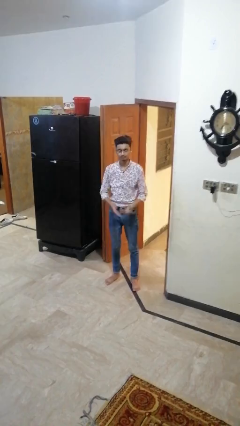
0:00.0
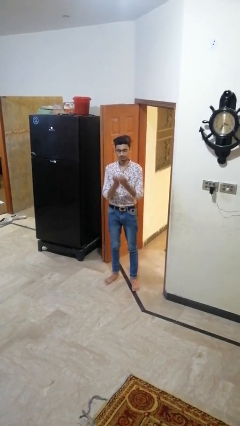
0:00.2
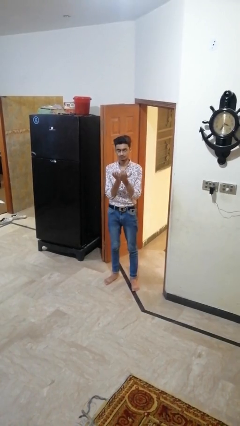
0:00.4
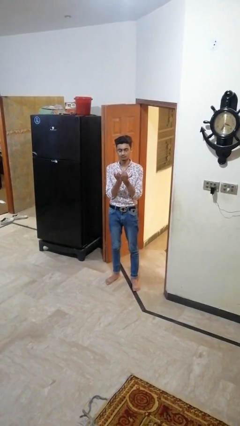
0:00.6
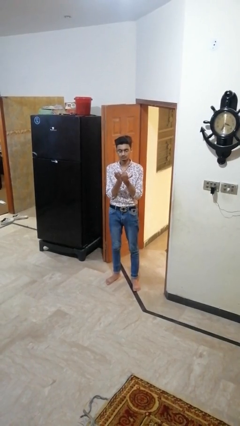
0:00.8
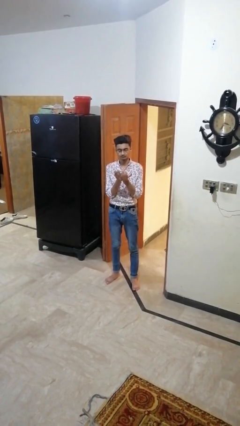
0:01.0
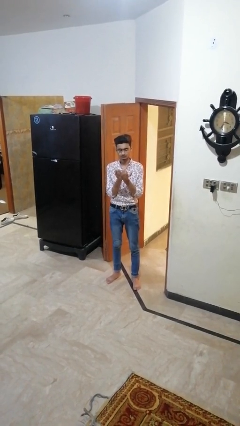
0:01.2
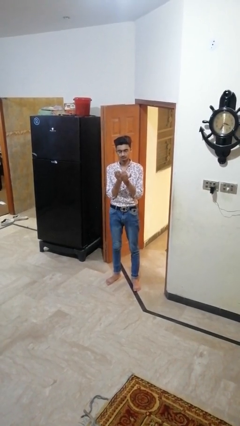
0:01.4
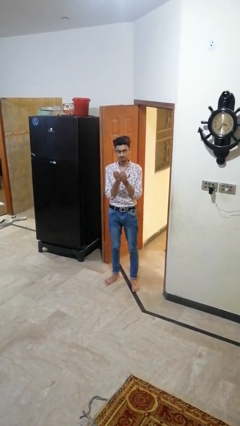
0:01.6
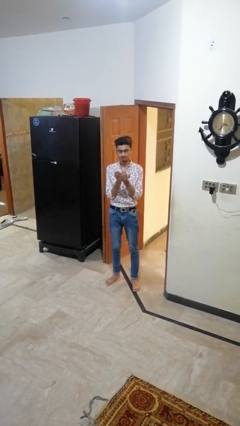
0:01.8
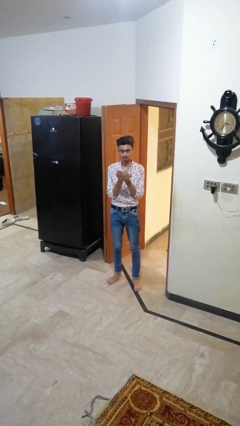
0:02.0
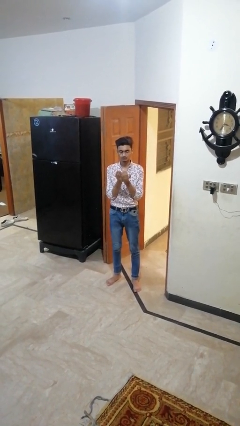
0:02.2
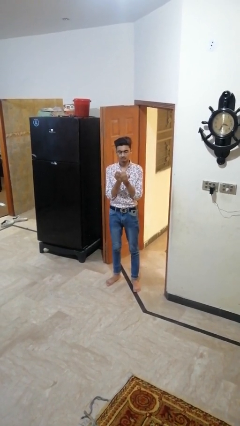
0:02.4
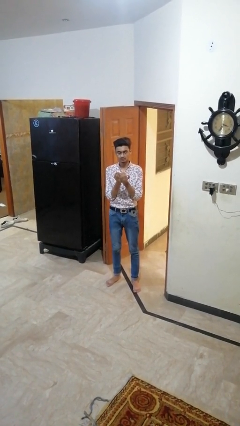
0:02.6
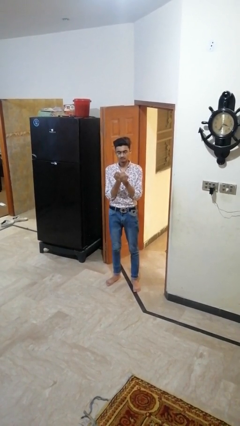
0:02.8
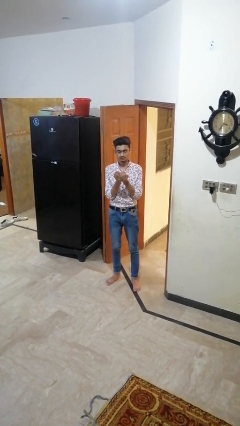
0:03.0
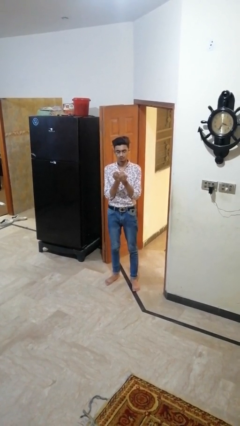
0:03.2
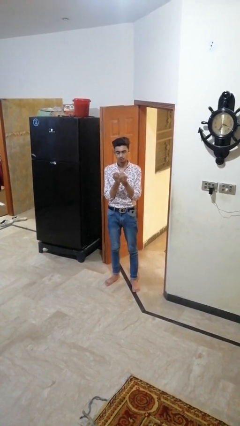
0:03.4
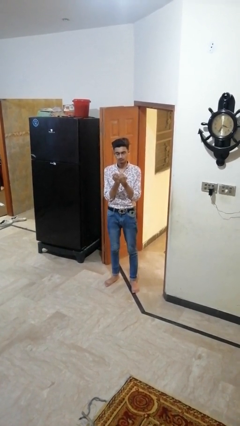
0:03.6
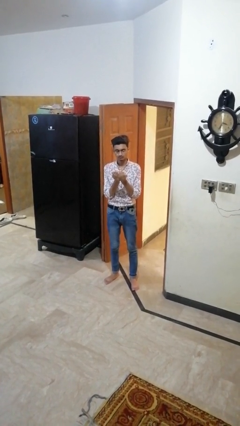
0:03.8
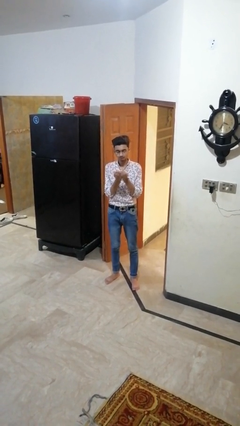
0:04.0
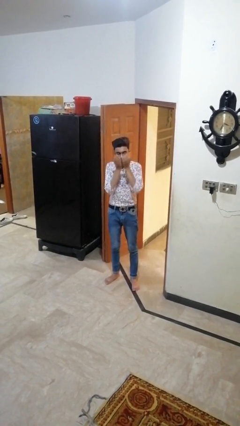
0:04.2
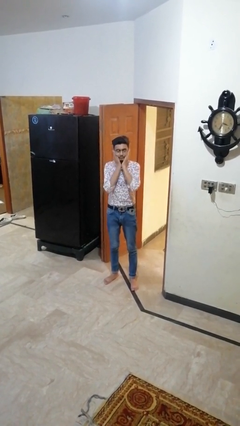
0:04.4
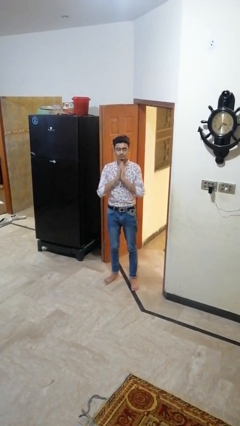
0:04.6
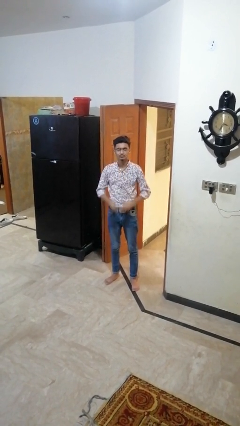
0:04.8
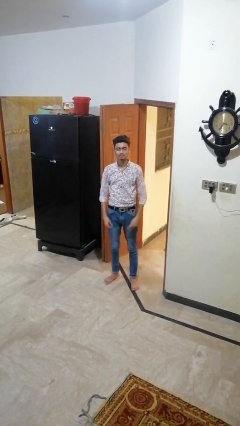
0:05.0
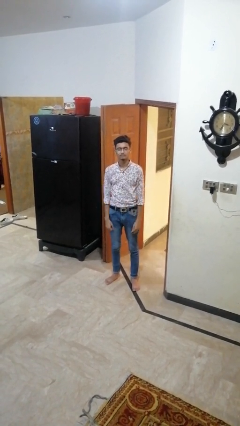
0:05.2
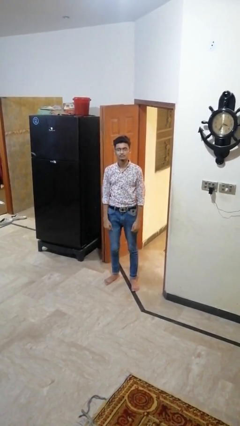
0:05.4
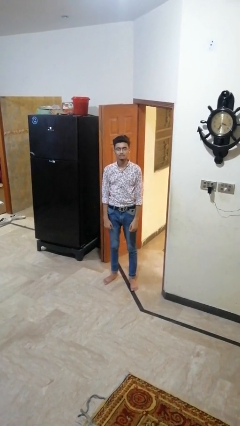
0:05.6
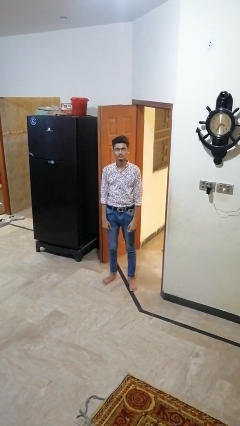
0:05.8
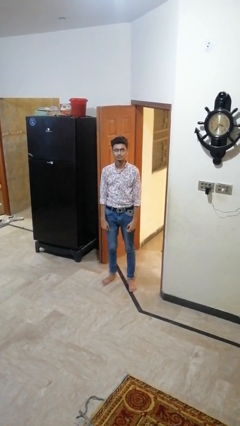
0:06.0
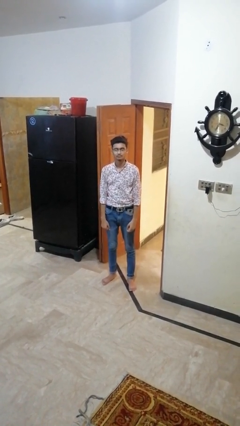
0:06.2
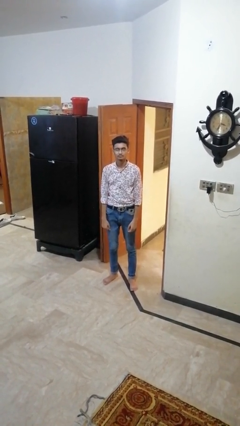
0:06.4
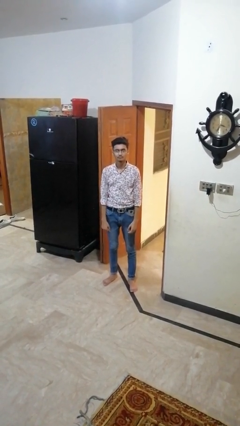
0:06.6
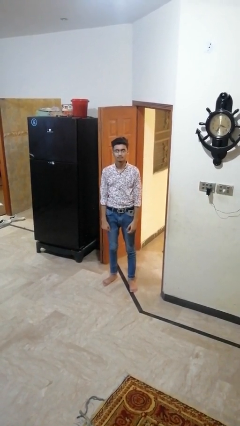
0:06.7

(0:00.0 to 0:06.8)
person prays

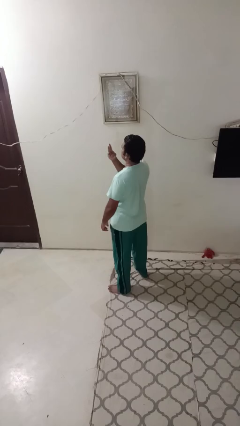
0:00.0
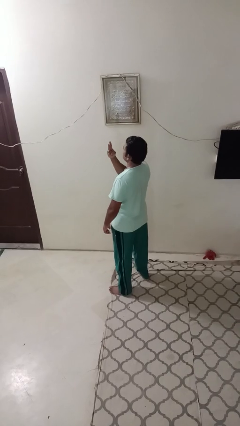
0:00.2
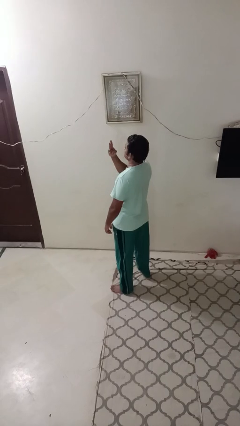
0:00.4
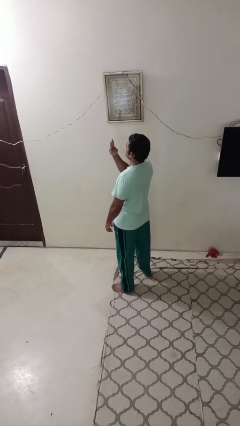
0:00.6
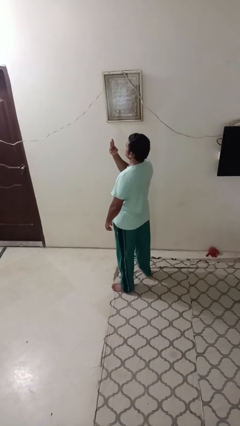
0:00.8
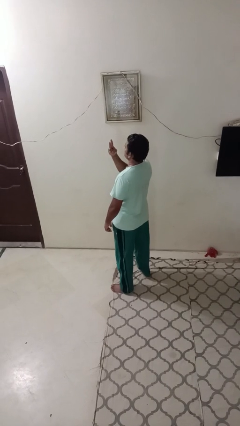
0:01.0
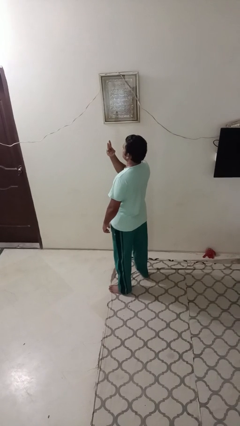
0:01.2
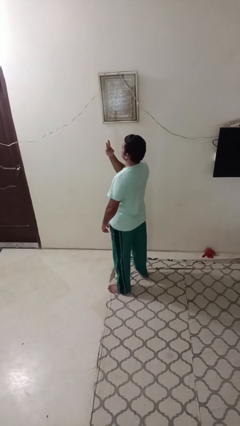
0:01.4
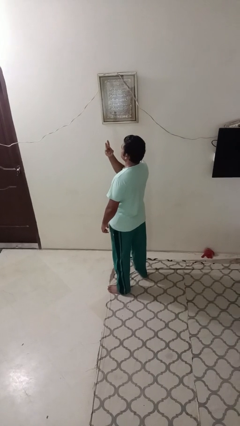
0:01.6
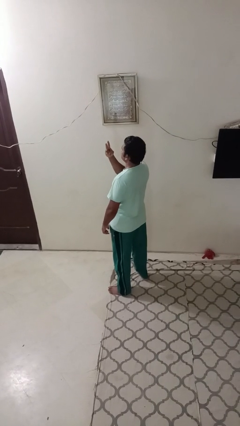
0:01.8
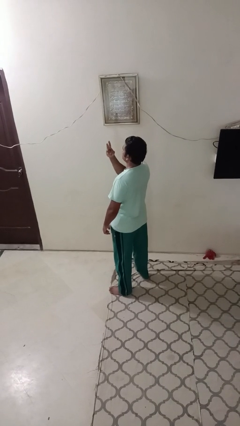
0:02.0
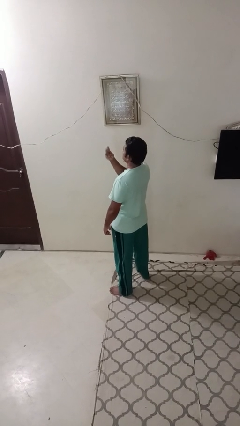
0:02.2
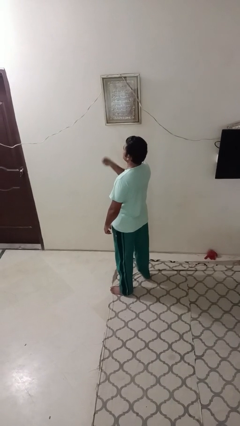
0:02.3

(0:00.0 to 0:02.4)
person gestures peace

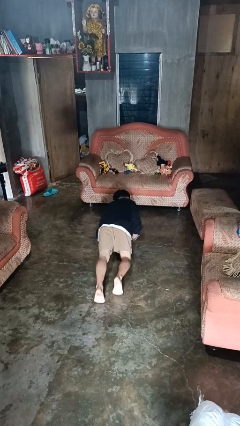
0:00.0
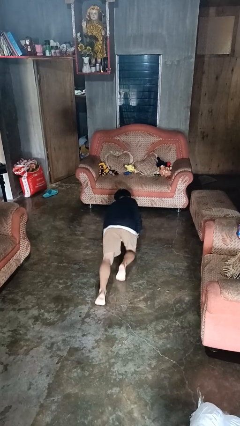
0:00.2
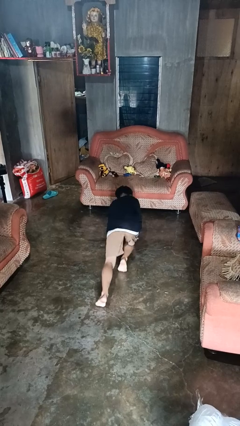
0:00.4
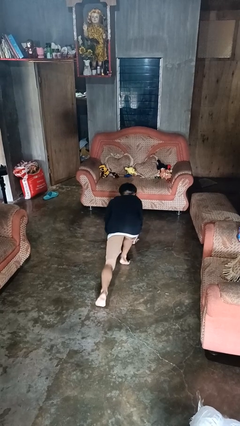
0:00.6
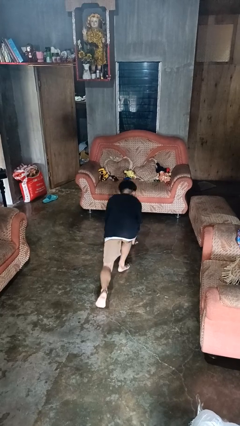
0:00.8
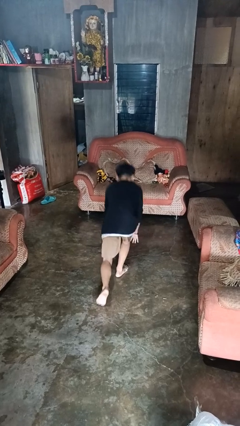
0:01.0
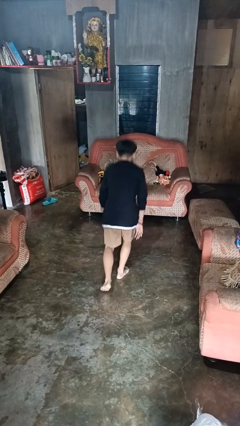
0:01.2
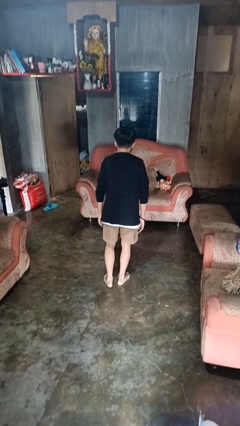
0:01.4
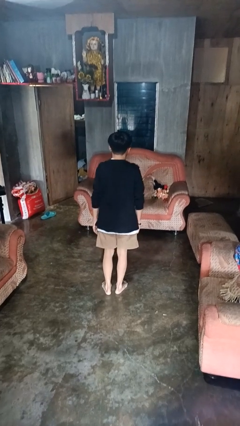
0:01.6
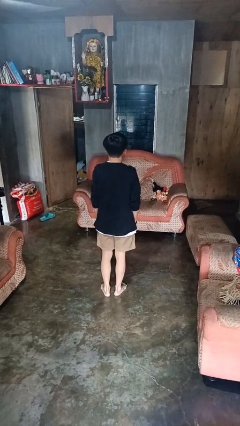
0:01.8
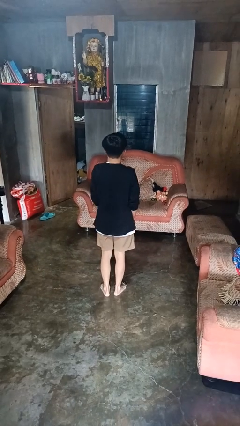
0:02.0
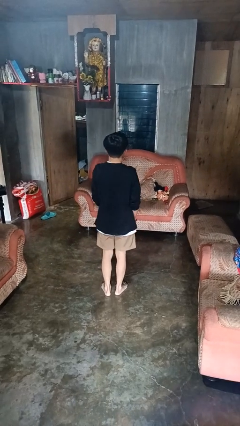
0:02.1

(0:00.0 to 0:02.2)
person stands up from floor

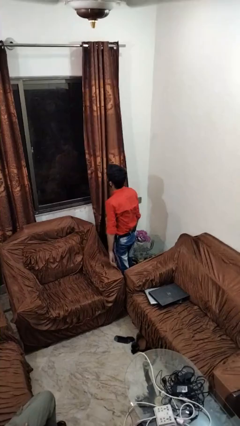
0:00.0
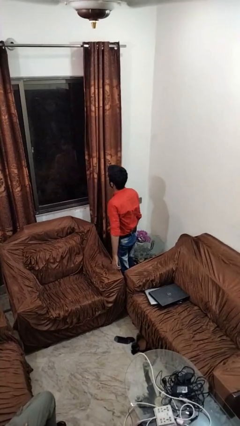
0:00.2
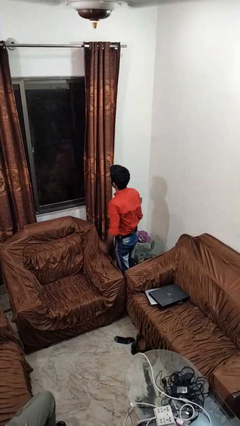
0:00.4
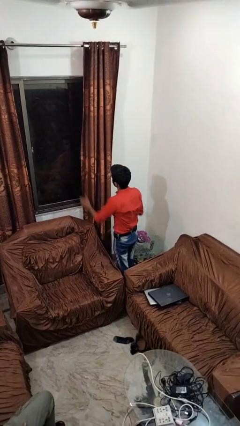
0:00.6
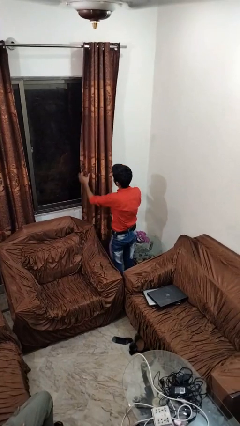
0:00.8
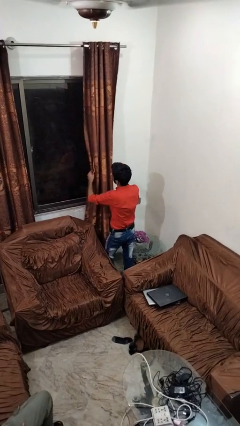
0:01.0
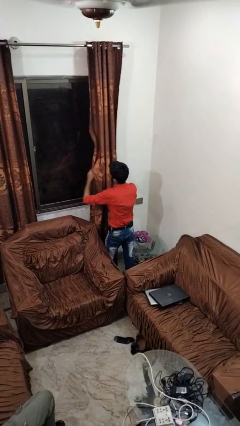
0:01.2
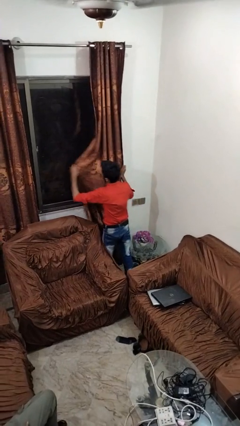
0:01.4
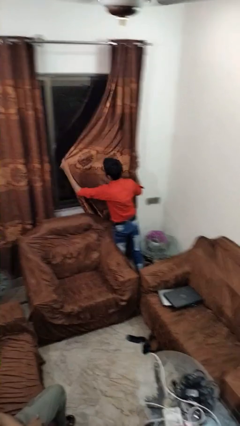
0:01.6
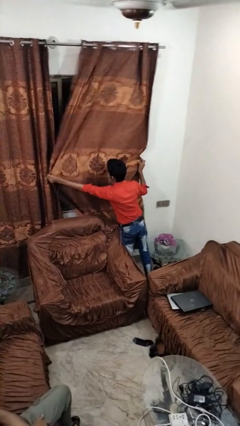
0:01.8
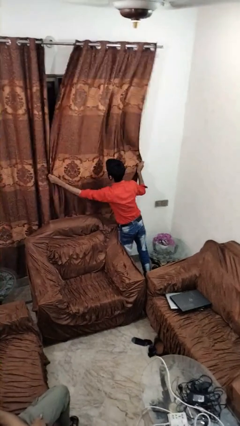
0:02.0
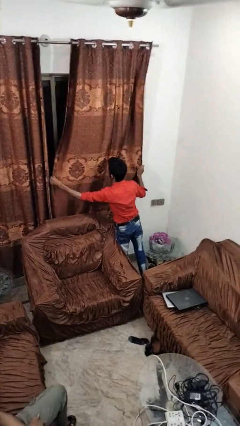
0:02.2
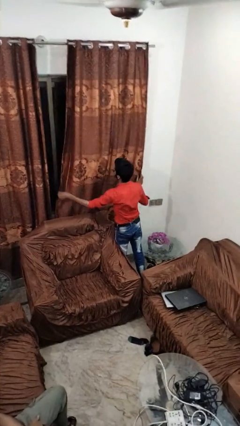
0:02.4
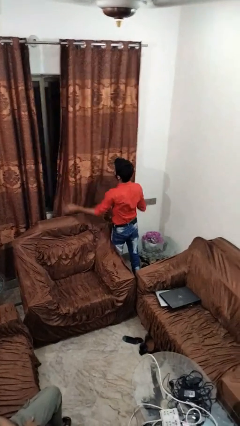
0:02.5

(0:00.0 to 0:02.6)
person closes curtains

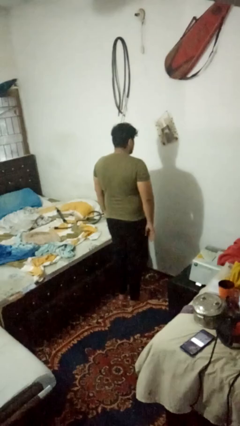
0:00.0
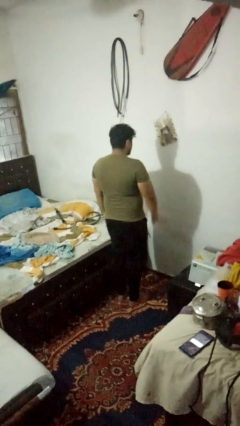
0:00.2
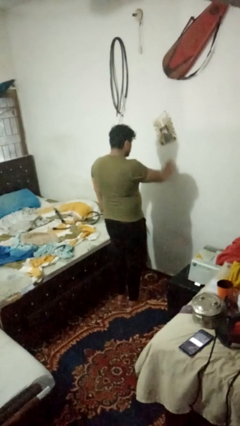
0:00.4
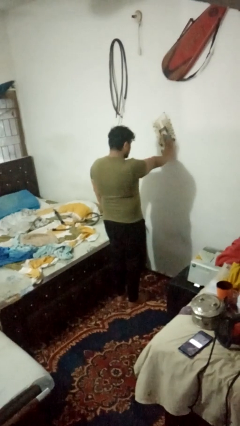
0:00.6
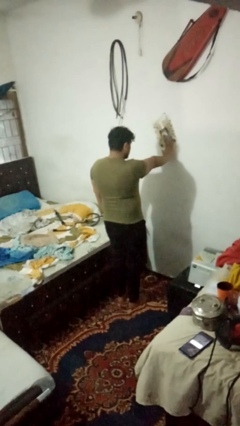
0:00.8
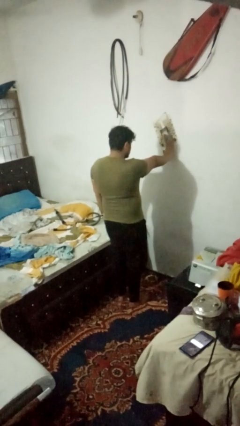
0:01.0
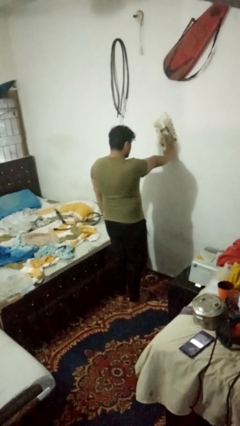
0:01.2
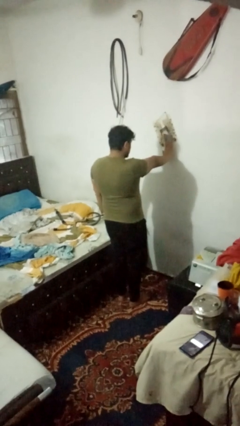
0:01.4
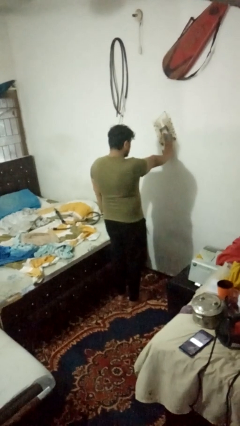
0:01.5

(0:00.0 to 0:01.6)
person gestures stop

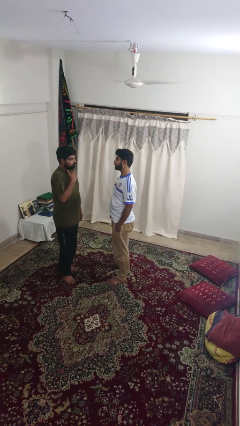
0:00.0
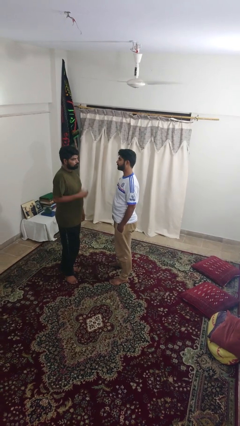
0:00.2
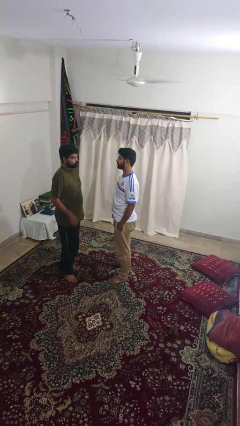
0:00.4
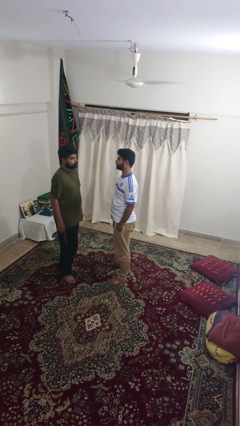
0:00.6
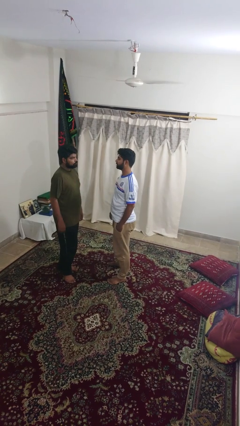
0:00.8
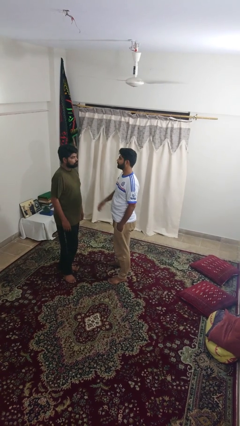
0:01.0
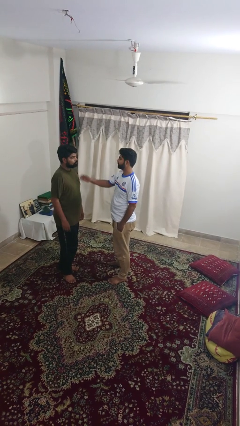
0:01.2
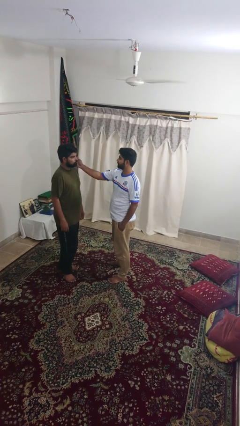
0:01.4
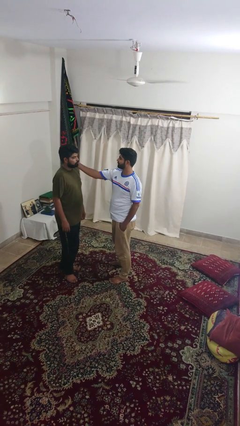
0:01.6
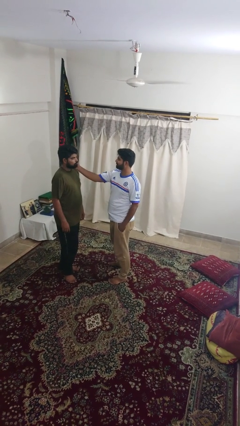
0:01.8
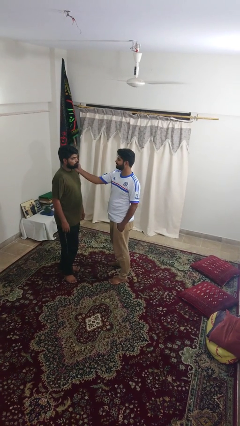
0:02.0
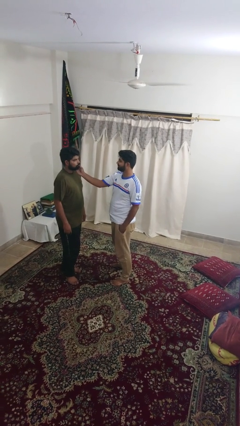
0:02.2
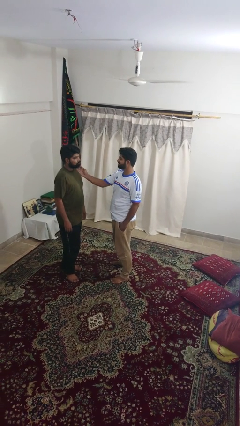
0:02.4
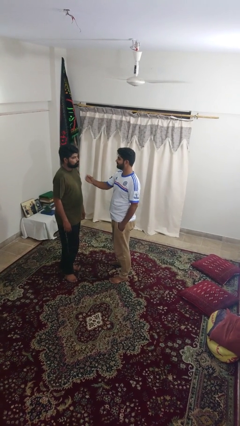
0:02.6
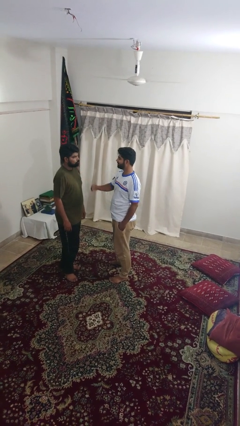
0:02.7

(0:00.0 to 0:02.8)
person touches face of person
